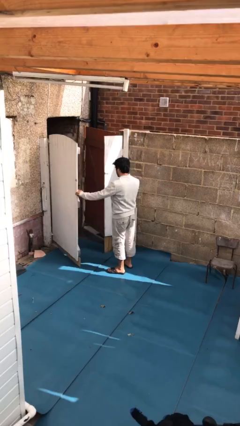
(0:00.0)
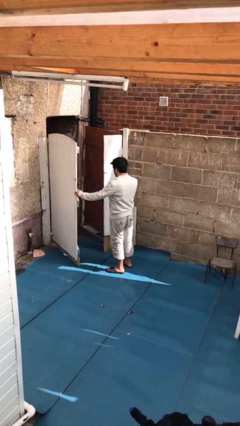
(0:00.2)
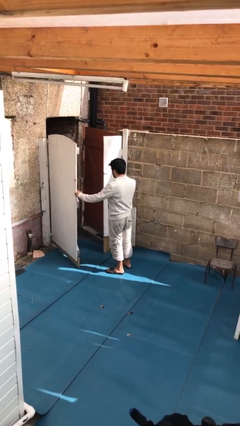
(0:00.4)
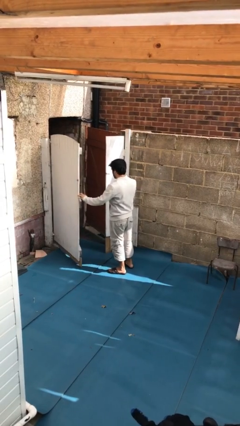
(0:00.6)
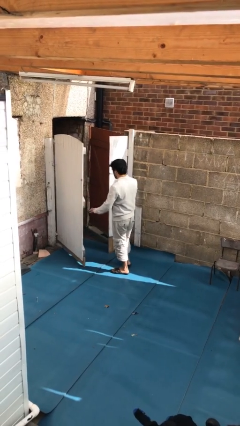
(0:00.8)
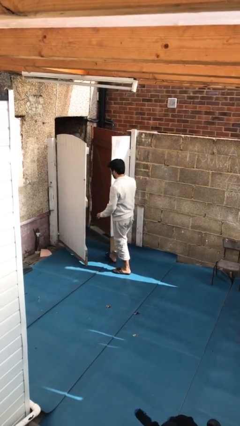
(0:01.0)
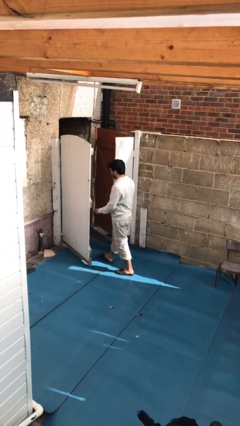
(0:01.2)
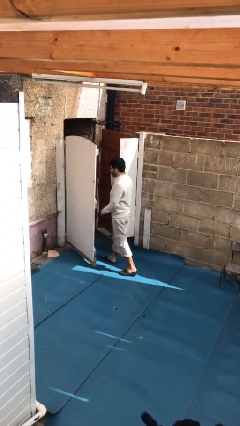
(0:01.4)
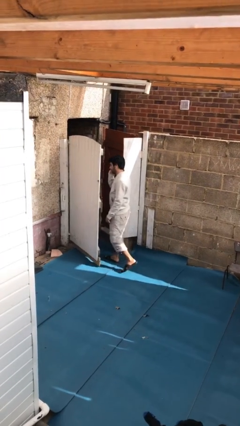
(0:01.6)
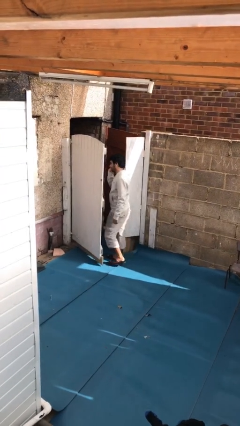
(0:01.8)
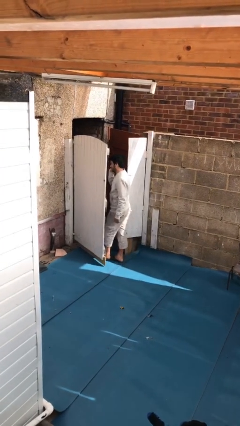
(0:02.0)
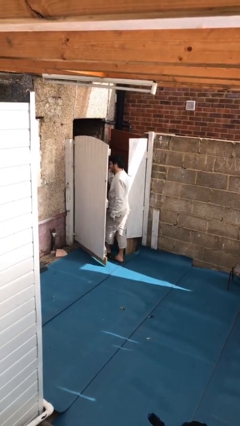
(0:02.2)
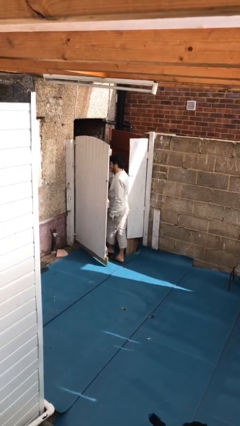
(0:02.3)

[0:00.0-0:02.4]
person exits scene through structure

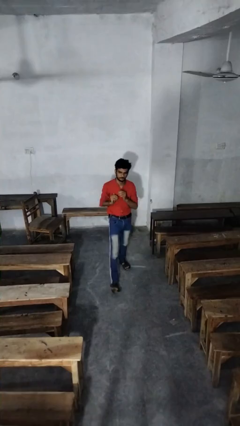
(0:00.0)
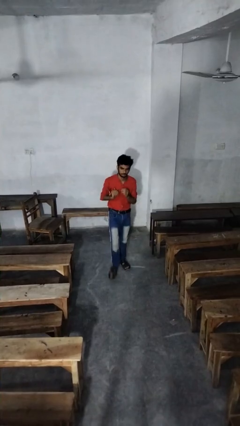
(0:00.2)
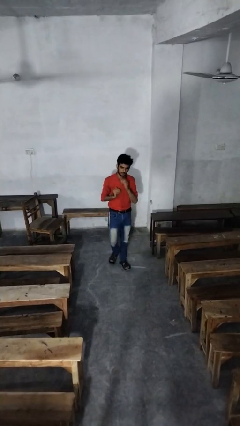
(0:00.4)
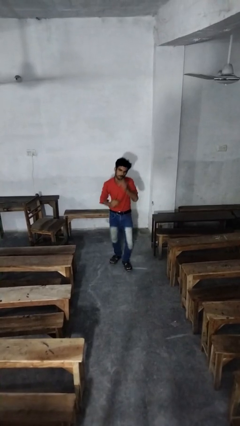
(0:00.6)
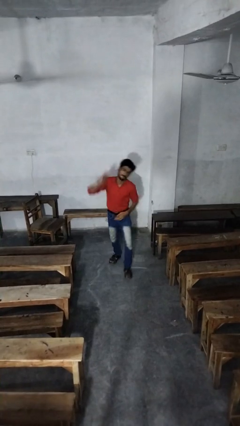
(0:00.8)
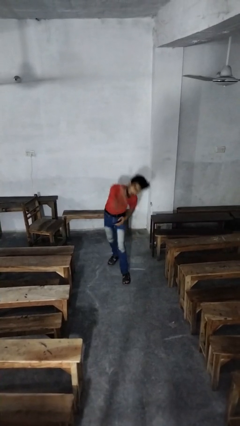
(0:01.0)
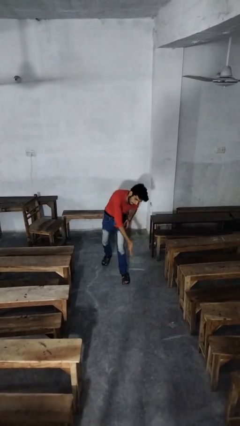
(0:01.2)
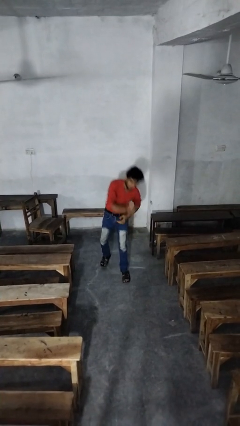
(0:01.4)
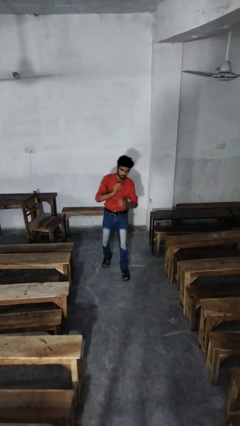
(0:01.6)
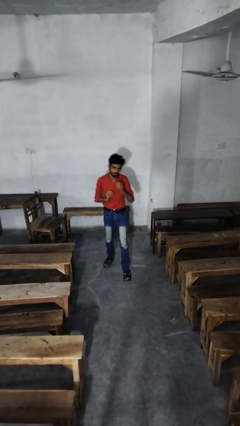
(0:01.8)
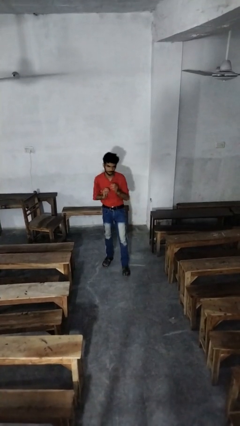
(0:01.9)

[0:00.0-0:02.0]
person karate chop

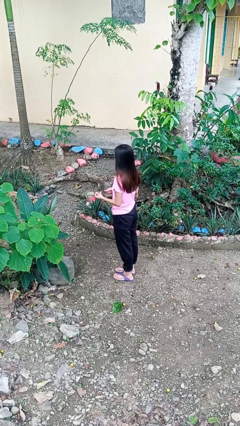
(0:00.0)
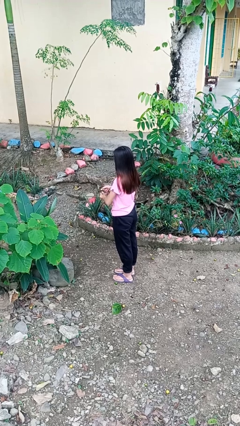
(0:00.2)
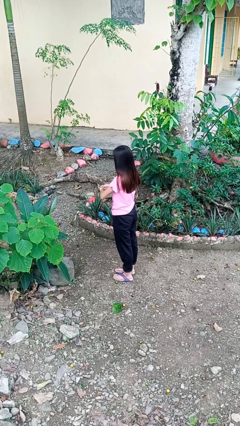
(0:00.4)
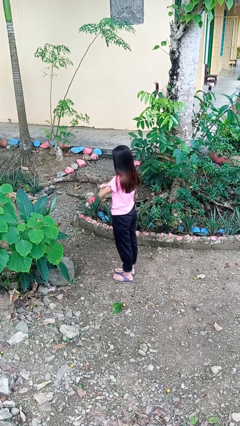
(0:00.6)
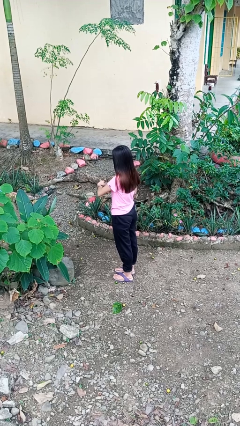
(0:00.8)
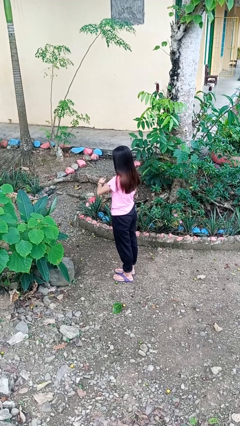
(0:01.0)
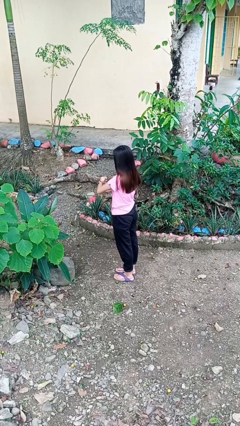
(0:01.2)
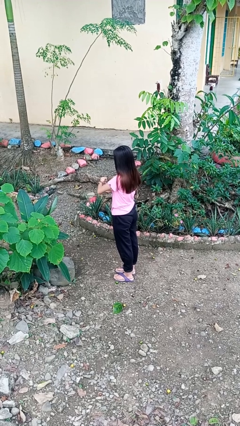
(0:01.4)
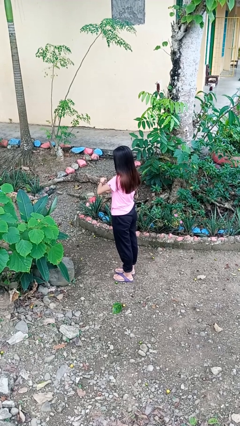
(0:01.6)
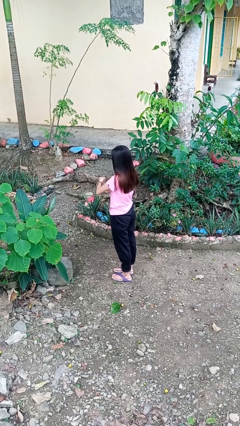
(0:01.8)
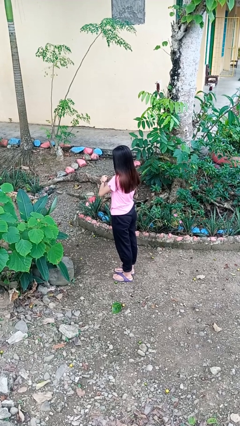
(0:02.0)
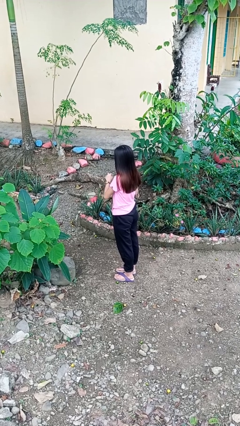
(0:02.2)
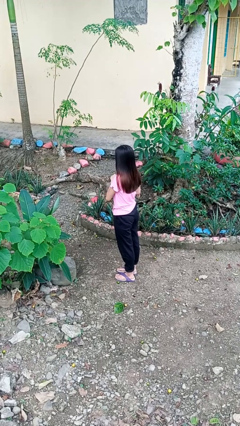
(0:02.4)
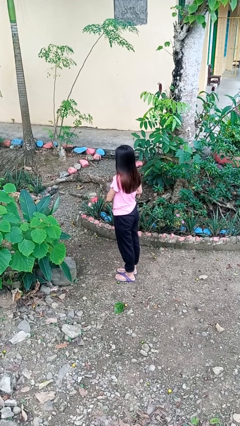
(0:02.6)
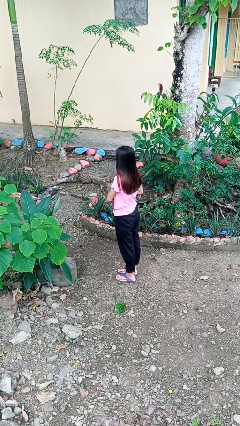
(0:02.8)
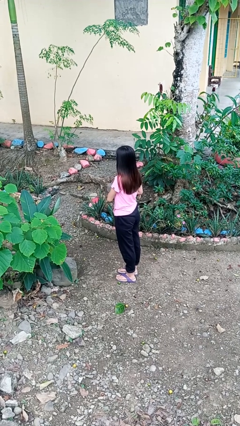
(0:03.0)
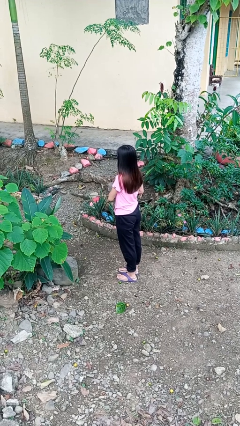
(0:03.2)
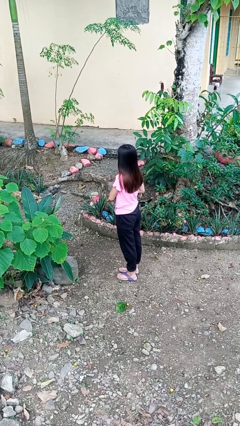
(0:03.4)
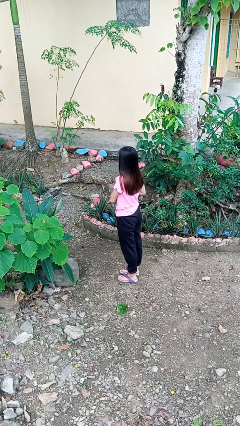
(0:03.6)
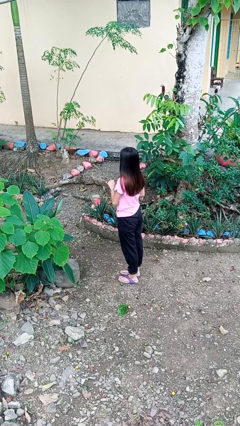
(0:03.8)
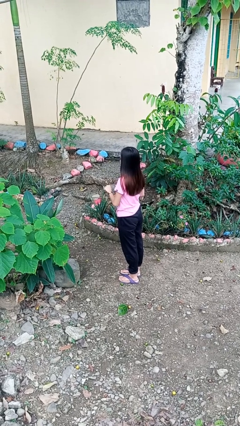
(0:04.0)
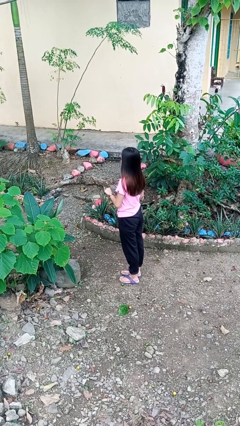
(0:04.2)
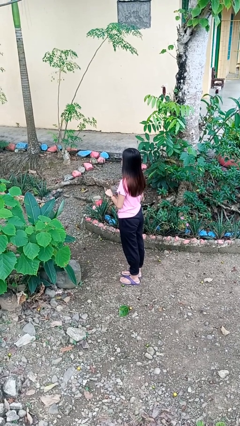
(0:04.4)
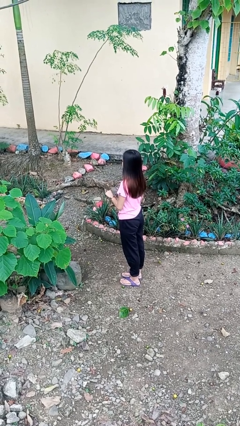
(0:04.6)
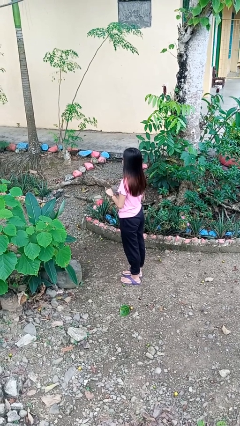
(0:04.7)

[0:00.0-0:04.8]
person puts on wristwatch

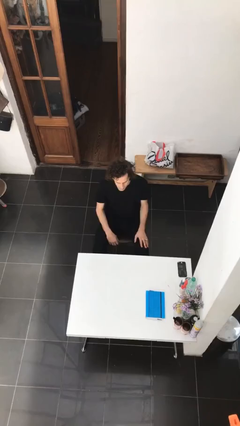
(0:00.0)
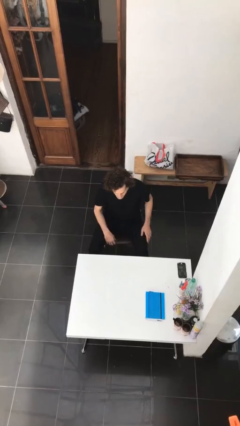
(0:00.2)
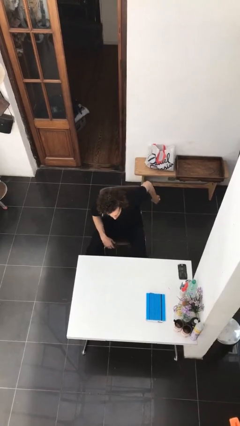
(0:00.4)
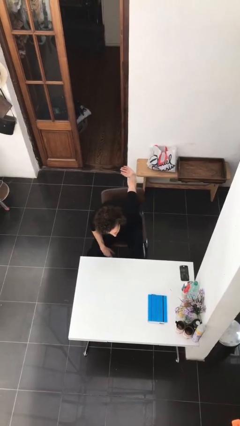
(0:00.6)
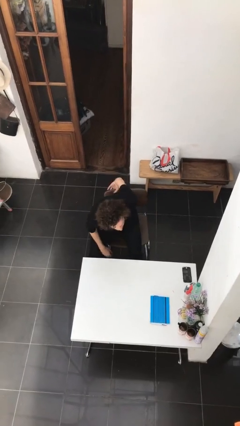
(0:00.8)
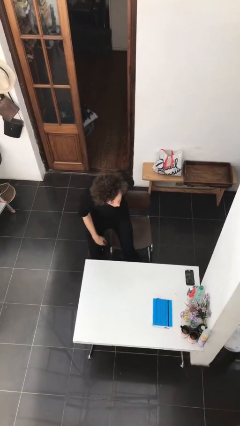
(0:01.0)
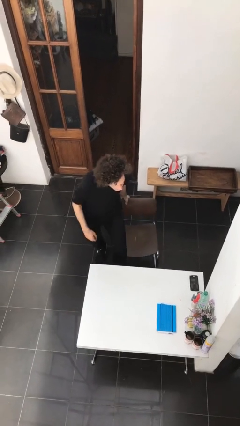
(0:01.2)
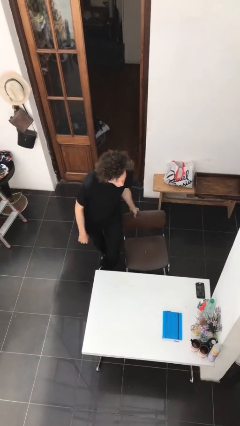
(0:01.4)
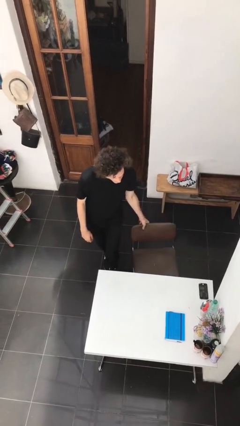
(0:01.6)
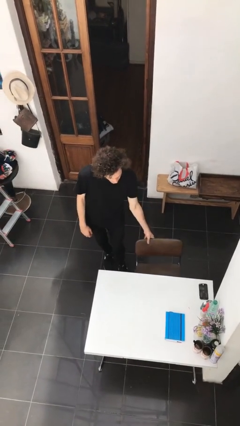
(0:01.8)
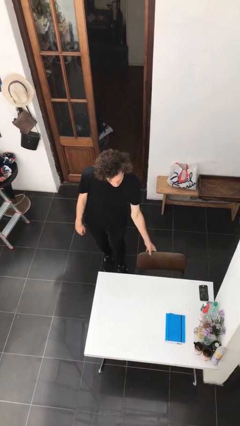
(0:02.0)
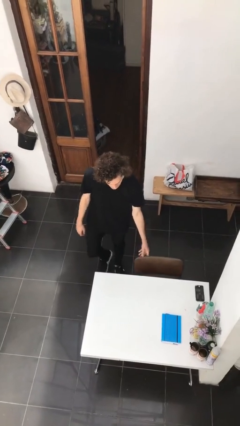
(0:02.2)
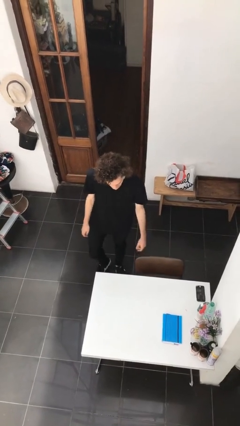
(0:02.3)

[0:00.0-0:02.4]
person stands up

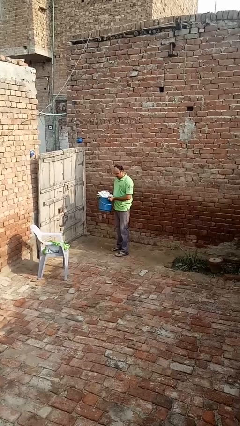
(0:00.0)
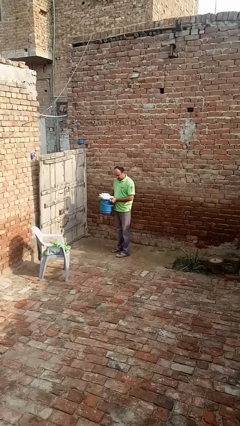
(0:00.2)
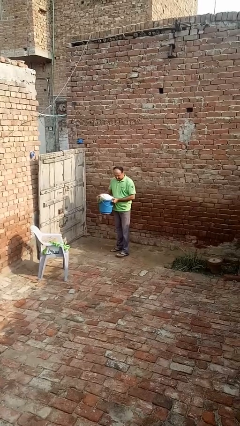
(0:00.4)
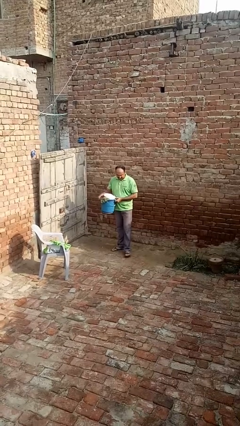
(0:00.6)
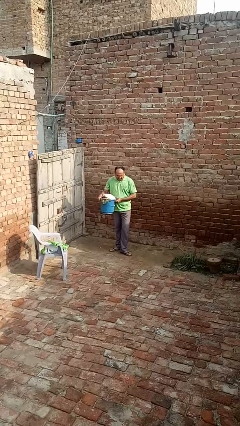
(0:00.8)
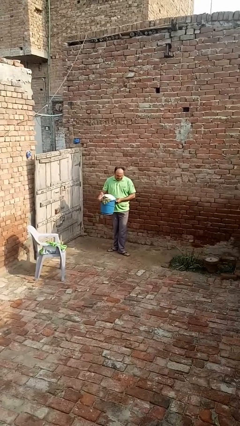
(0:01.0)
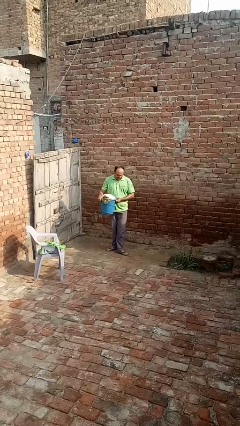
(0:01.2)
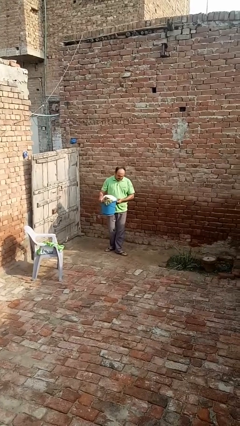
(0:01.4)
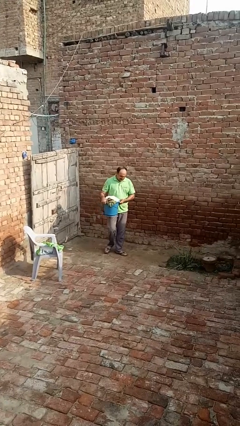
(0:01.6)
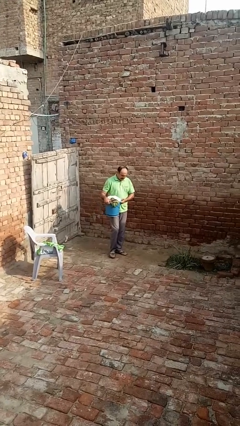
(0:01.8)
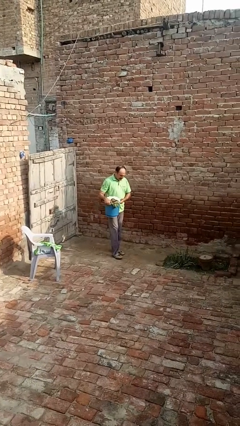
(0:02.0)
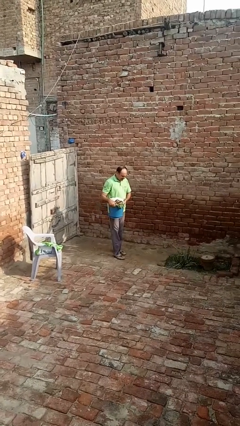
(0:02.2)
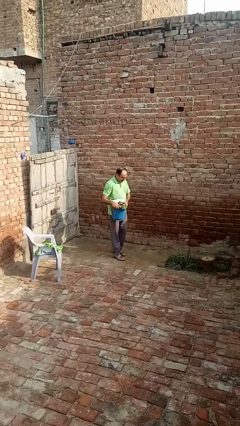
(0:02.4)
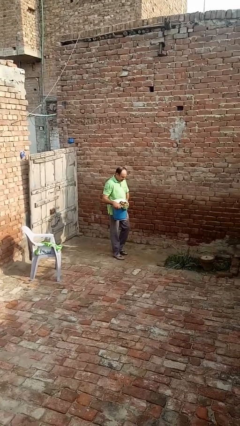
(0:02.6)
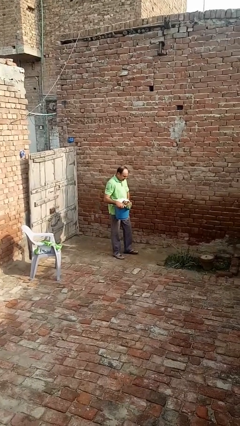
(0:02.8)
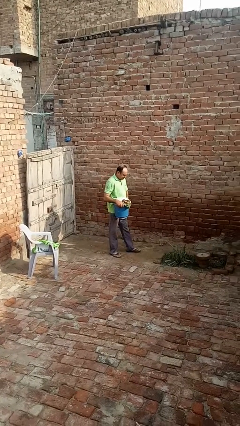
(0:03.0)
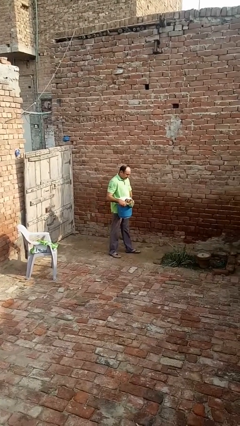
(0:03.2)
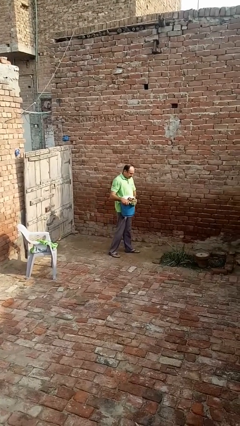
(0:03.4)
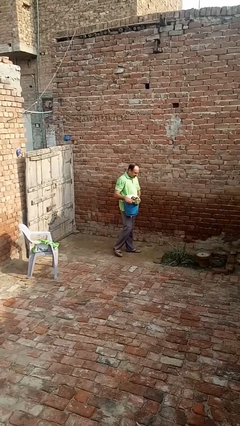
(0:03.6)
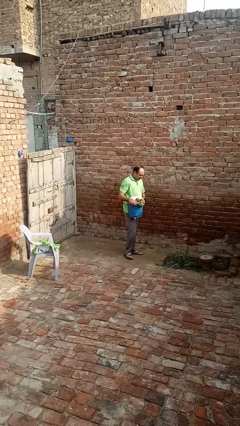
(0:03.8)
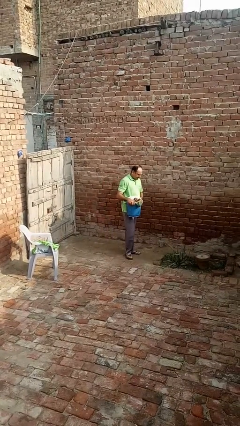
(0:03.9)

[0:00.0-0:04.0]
person carries laundry basket

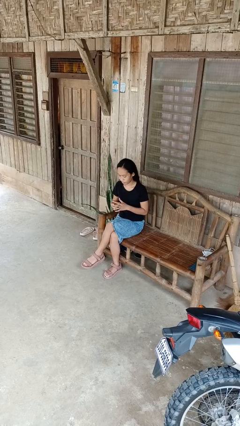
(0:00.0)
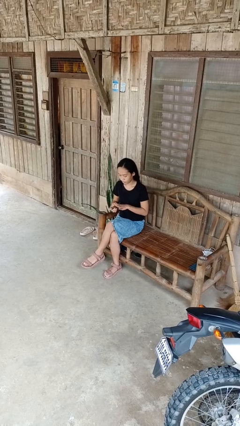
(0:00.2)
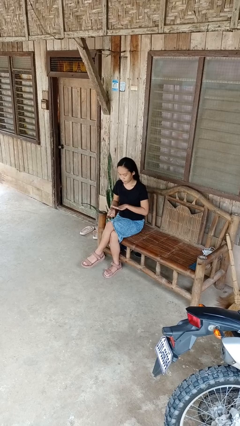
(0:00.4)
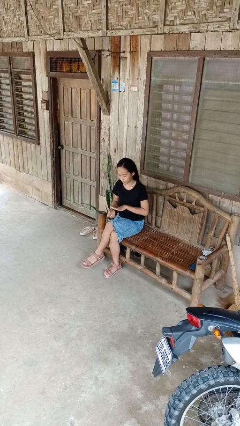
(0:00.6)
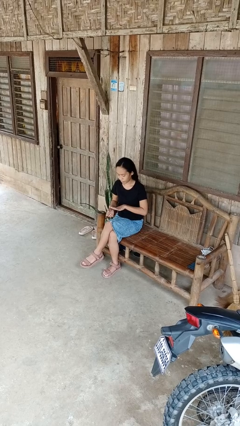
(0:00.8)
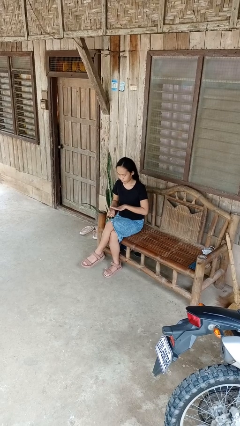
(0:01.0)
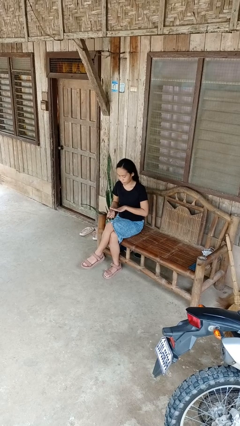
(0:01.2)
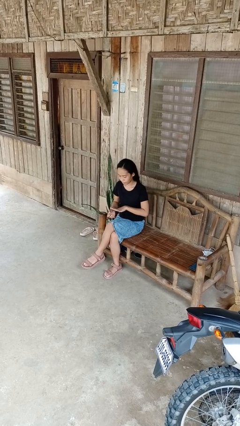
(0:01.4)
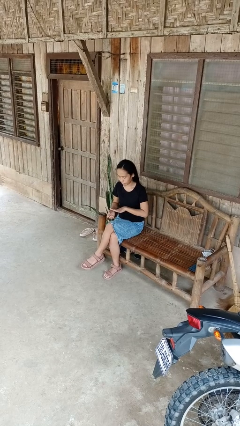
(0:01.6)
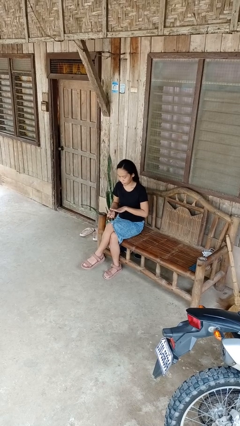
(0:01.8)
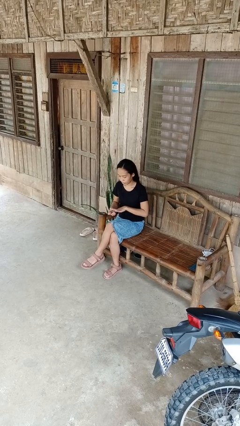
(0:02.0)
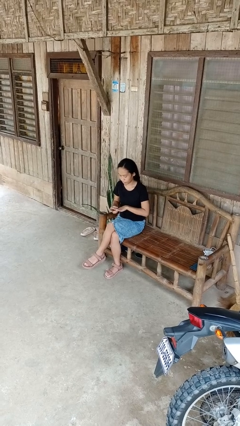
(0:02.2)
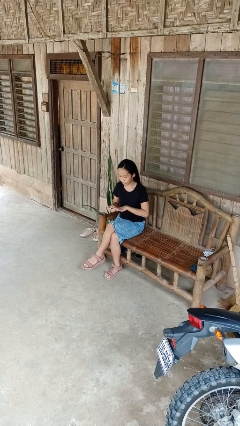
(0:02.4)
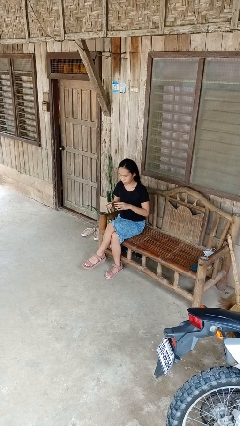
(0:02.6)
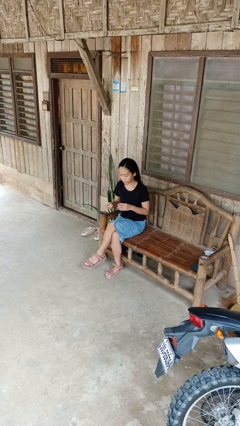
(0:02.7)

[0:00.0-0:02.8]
person puts on ring
